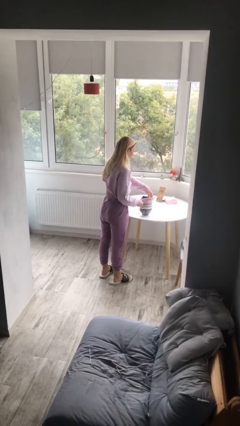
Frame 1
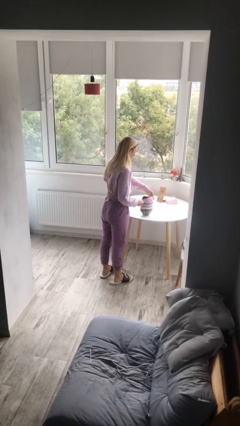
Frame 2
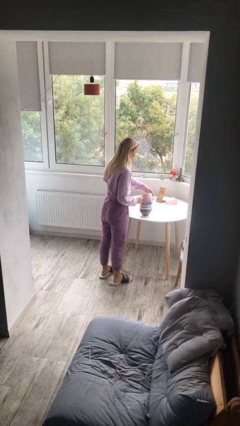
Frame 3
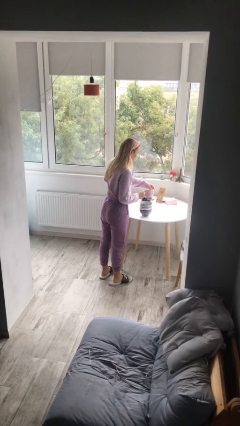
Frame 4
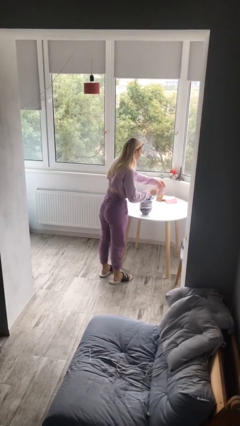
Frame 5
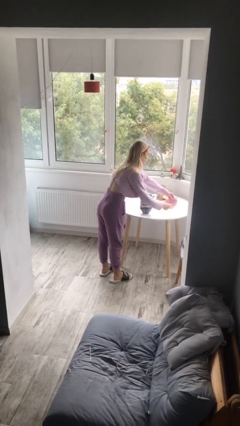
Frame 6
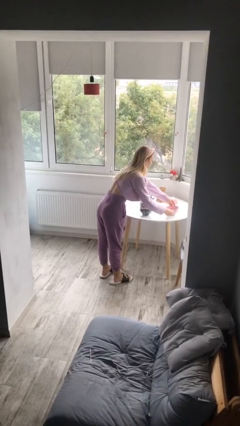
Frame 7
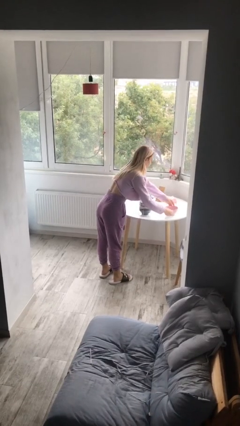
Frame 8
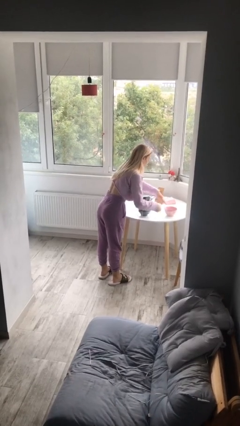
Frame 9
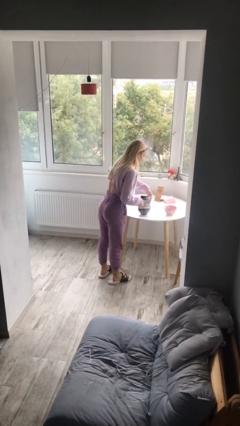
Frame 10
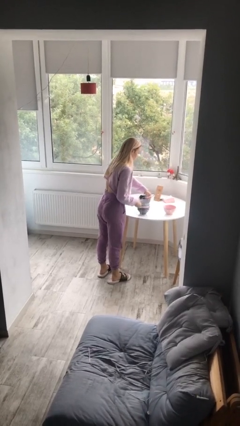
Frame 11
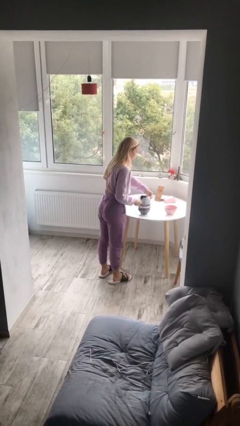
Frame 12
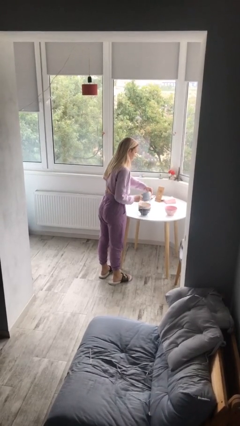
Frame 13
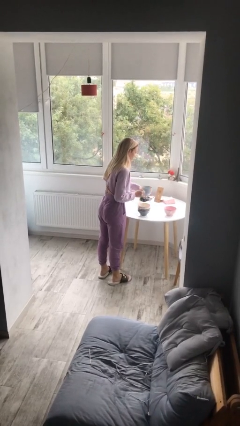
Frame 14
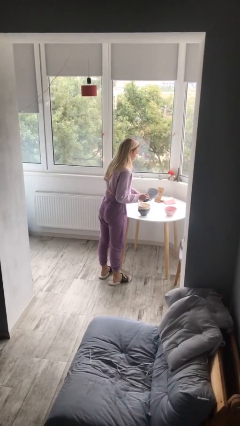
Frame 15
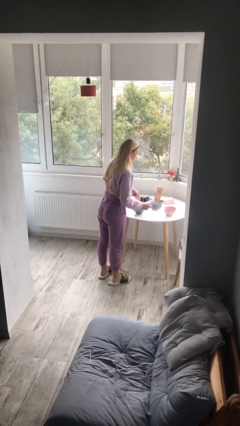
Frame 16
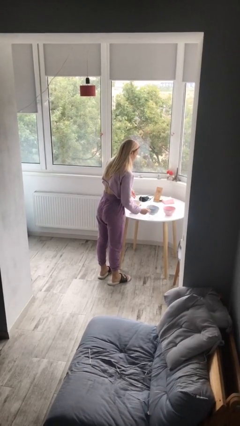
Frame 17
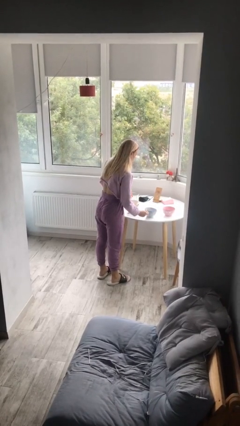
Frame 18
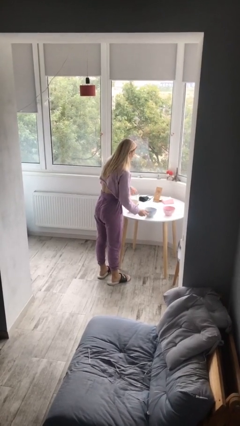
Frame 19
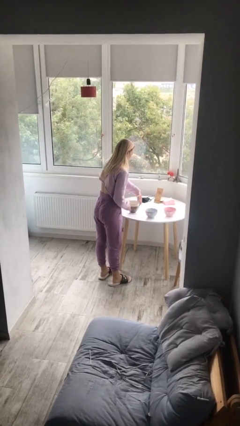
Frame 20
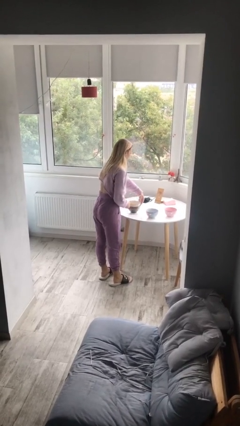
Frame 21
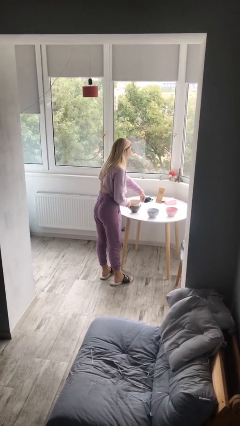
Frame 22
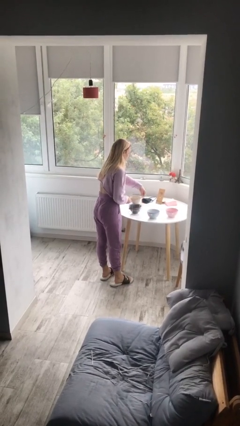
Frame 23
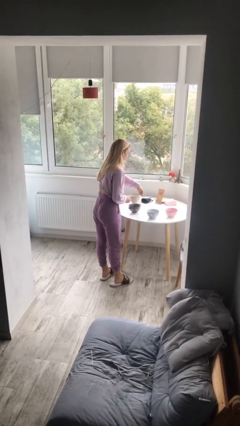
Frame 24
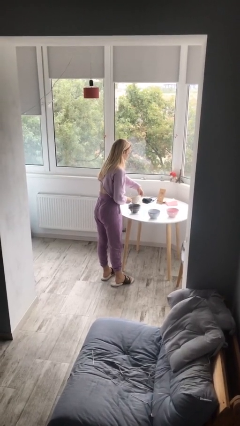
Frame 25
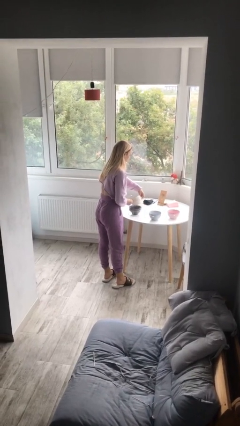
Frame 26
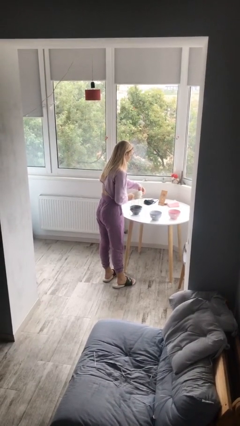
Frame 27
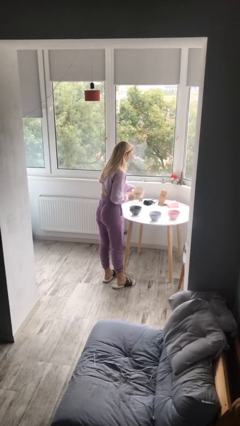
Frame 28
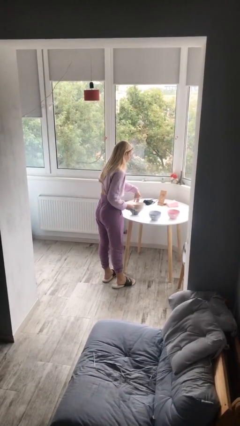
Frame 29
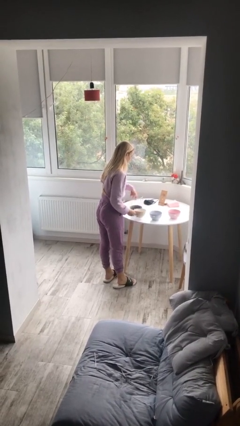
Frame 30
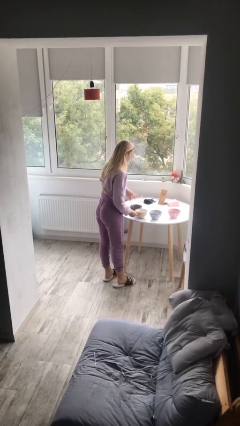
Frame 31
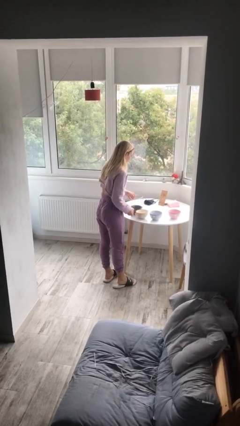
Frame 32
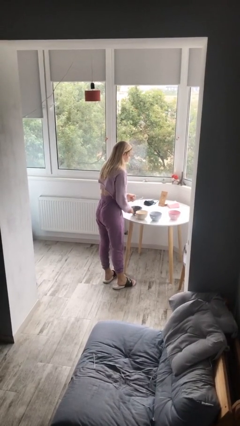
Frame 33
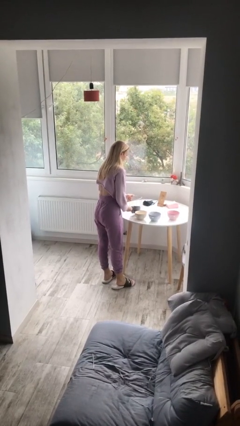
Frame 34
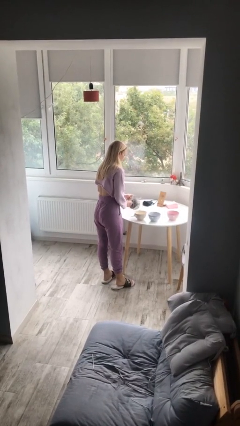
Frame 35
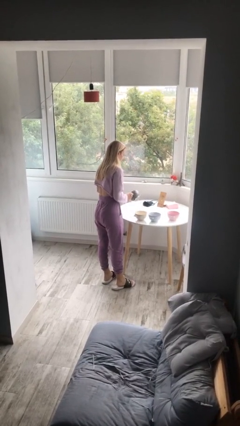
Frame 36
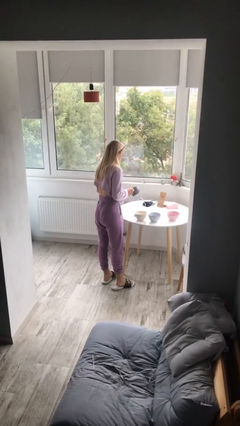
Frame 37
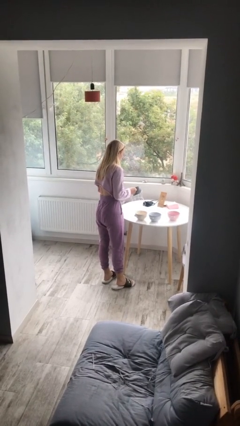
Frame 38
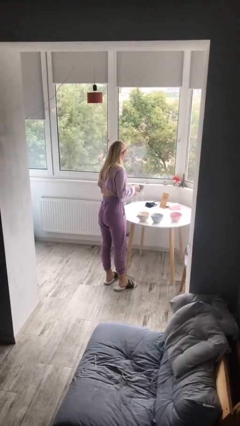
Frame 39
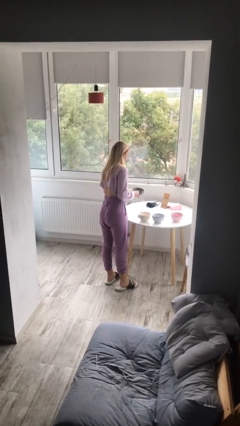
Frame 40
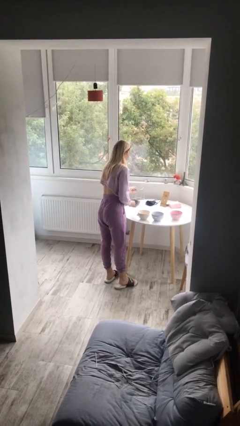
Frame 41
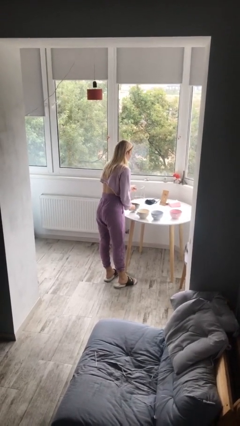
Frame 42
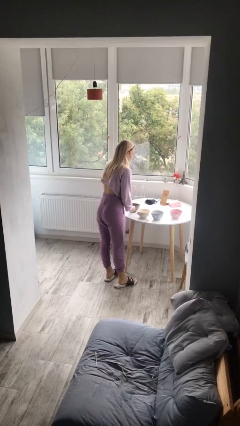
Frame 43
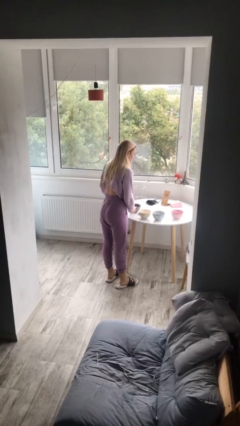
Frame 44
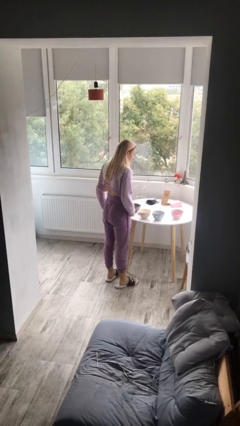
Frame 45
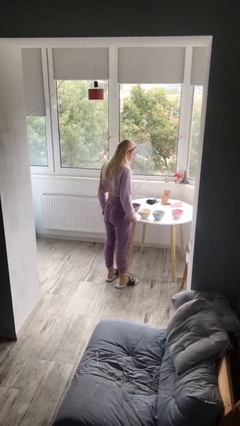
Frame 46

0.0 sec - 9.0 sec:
person sets table

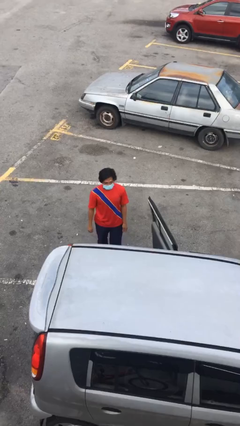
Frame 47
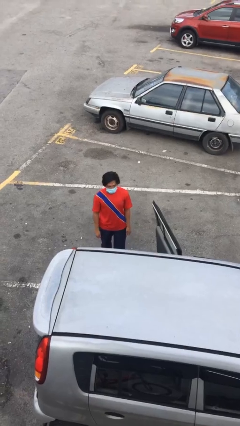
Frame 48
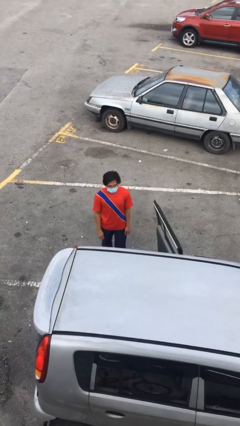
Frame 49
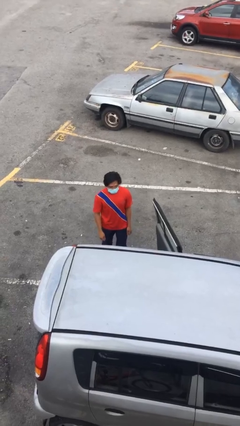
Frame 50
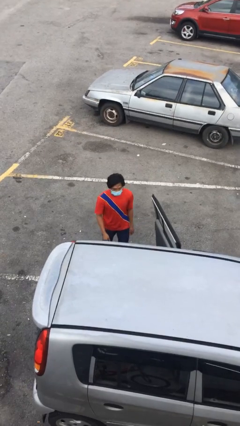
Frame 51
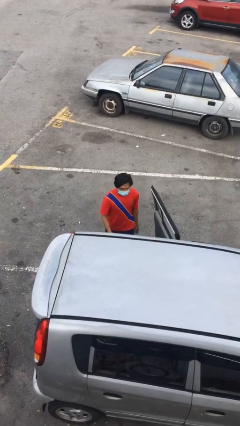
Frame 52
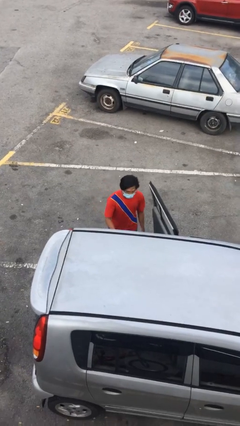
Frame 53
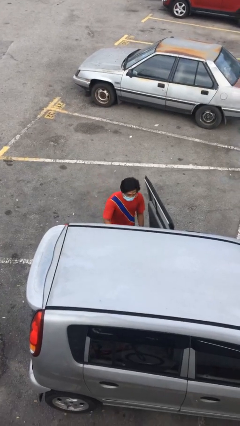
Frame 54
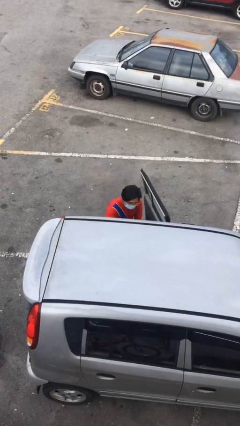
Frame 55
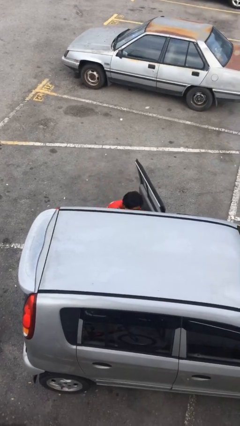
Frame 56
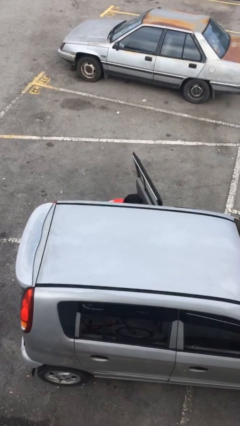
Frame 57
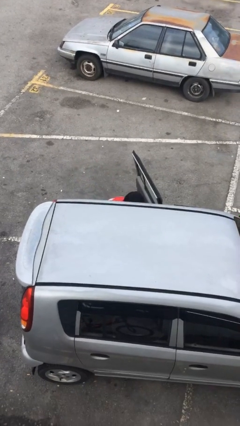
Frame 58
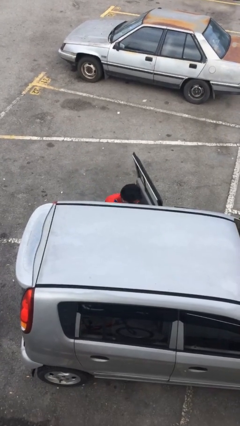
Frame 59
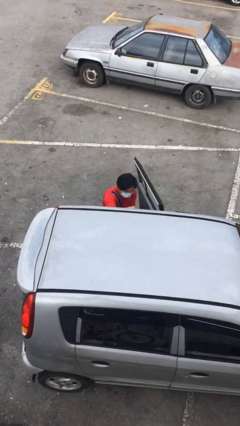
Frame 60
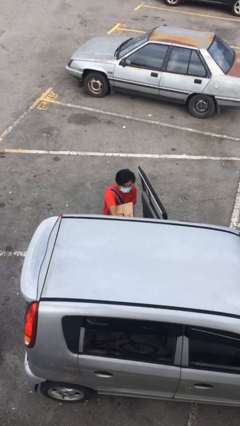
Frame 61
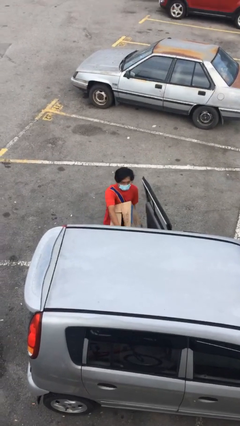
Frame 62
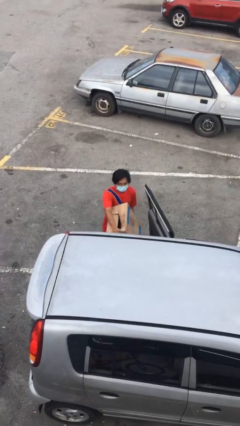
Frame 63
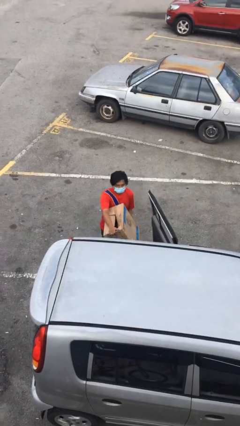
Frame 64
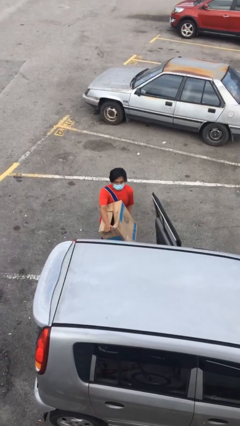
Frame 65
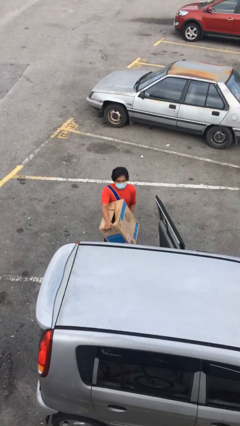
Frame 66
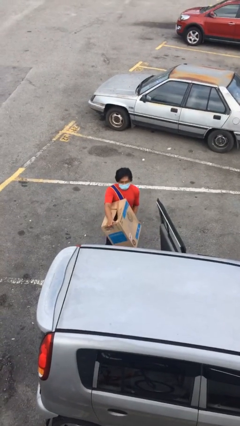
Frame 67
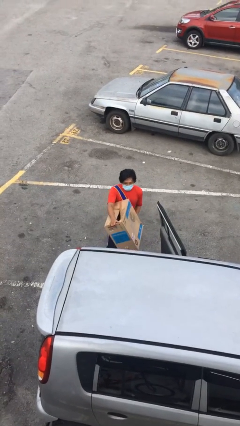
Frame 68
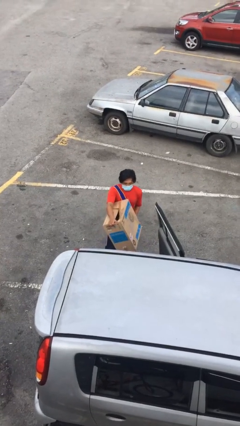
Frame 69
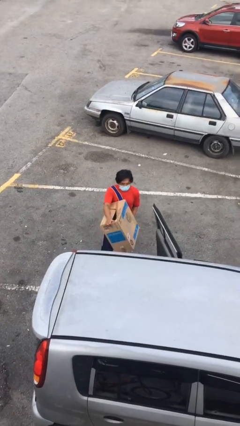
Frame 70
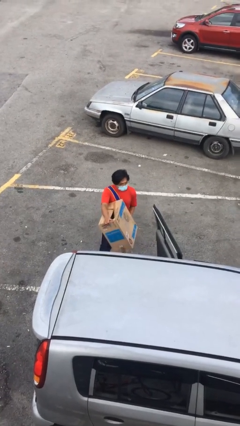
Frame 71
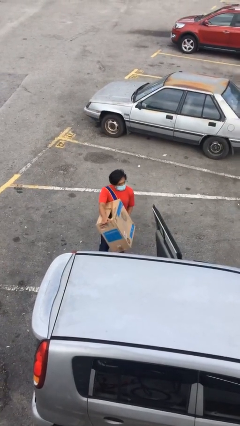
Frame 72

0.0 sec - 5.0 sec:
person unloads car

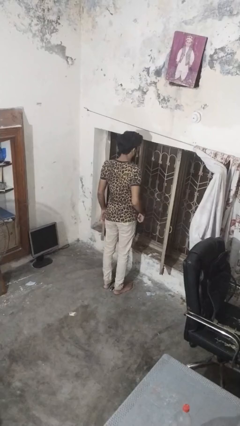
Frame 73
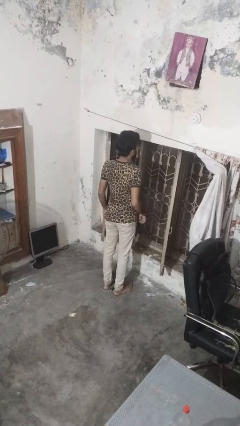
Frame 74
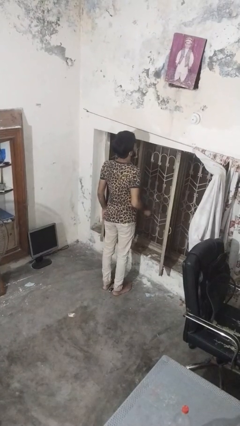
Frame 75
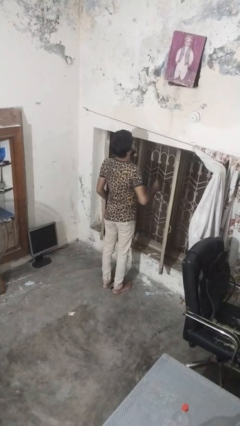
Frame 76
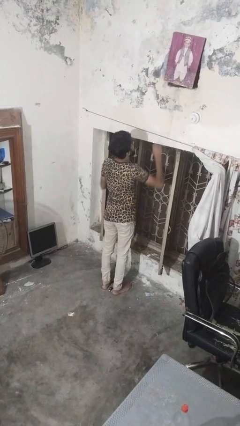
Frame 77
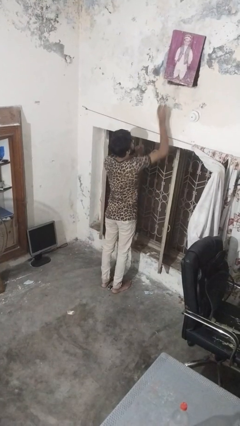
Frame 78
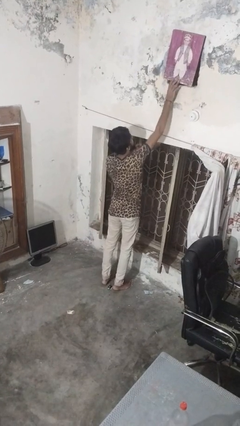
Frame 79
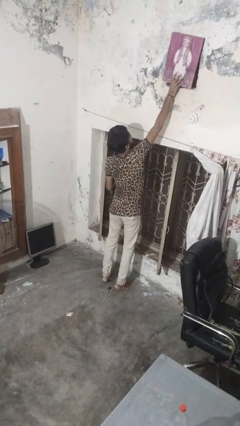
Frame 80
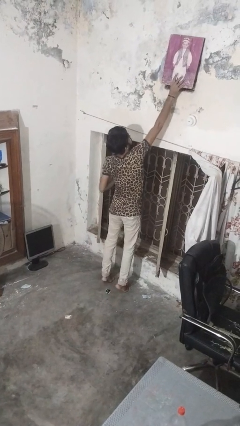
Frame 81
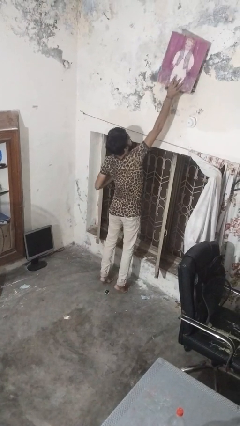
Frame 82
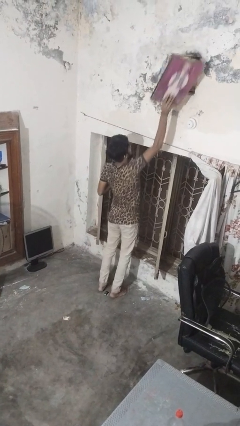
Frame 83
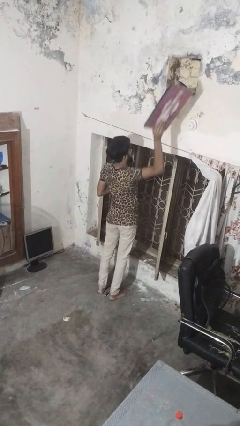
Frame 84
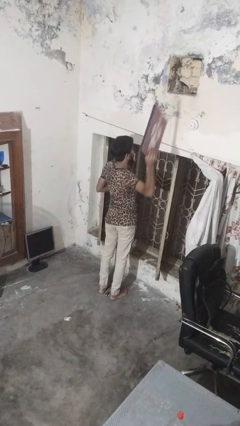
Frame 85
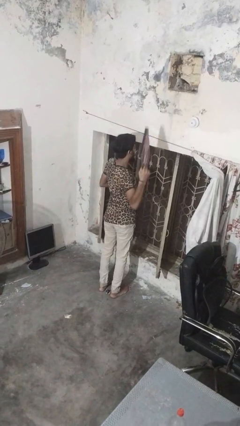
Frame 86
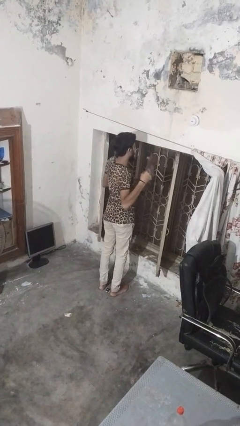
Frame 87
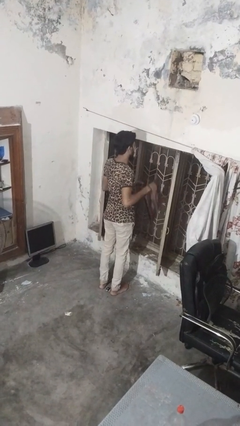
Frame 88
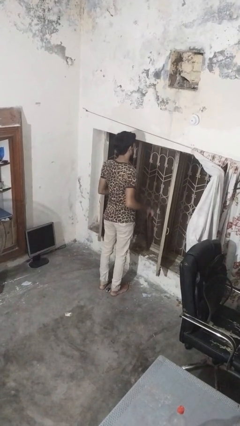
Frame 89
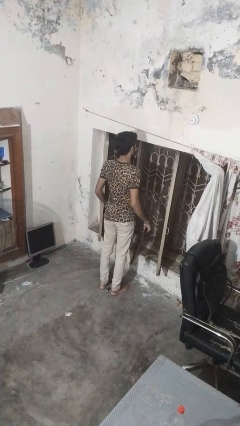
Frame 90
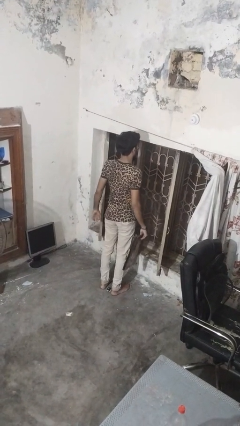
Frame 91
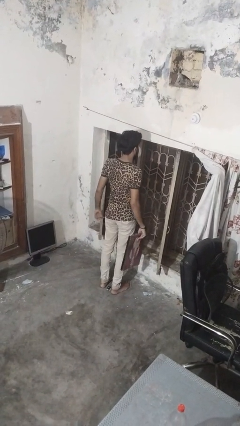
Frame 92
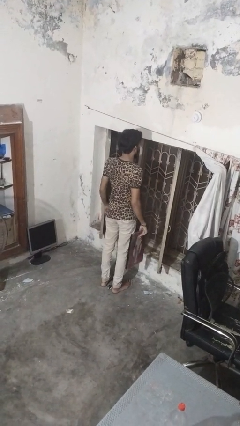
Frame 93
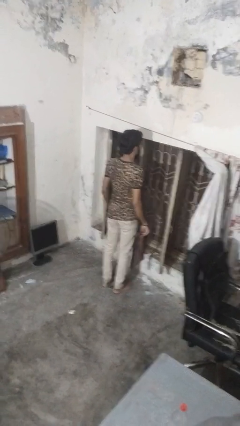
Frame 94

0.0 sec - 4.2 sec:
person takes down picture frame
